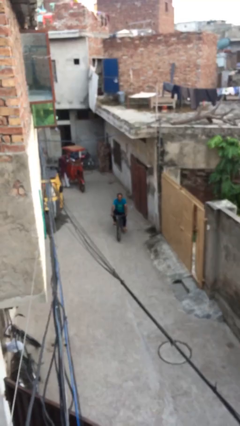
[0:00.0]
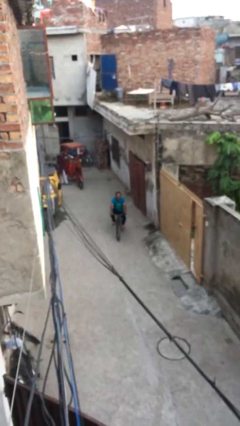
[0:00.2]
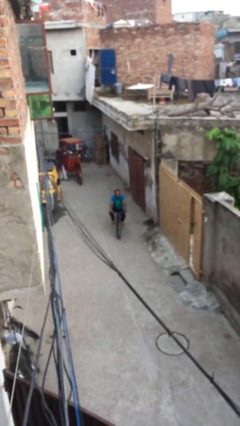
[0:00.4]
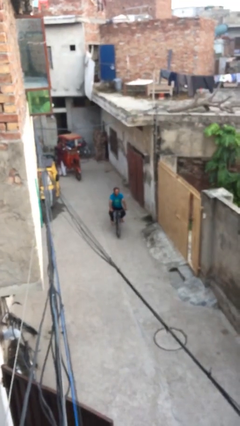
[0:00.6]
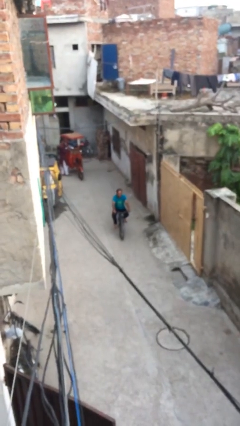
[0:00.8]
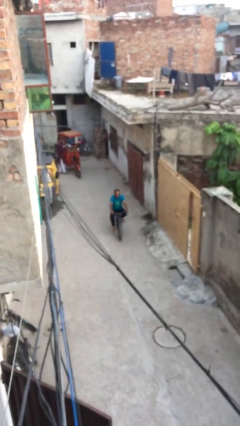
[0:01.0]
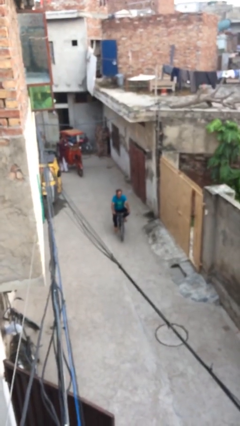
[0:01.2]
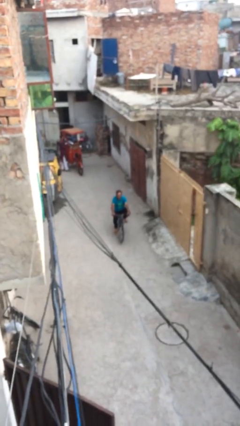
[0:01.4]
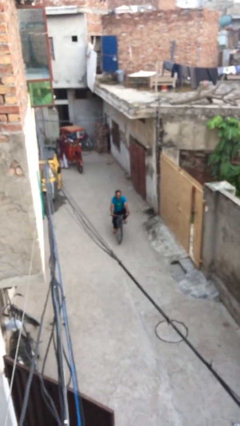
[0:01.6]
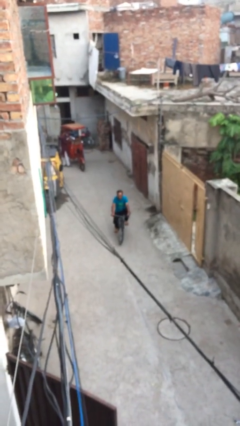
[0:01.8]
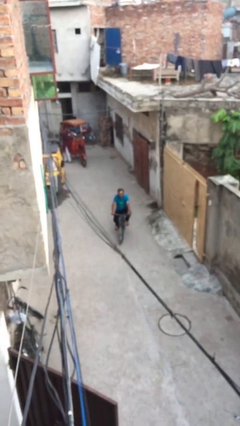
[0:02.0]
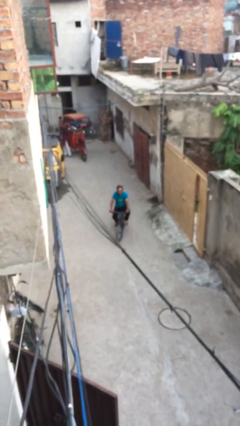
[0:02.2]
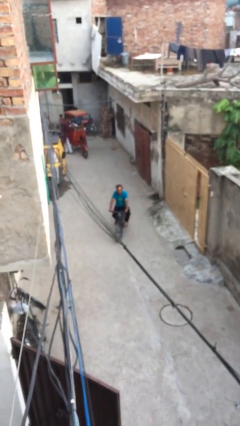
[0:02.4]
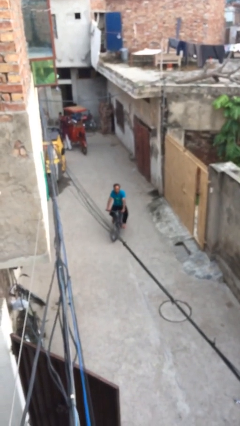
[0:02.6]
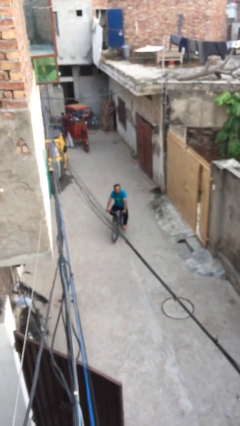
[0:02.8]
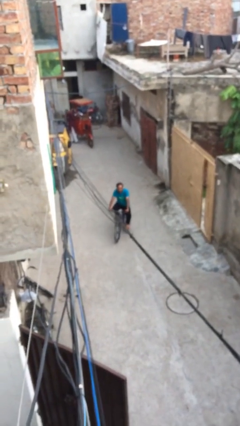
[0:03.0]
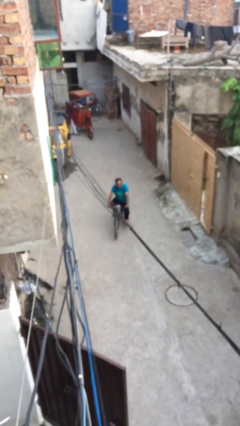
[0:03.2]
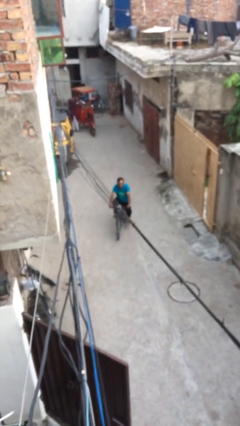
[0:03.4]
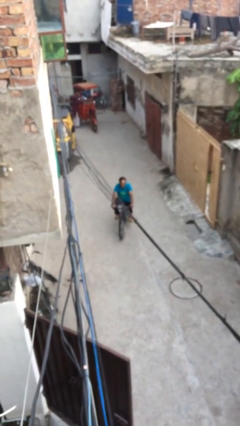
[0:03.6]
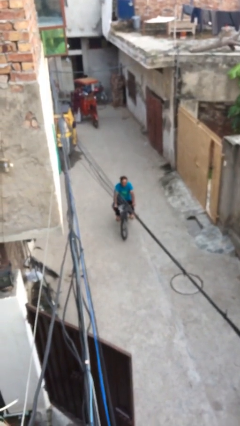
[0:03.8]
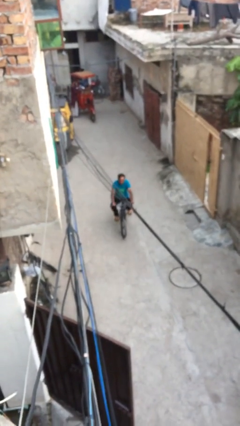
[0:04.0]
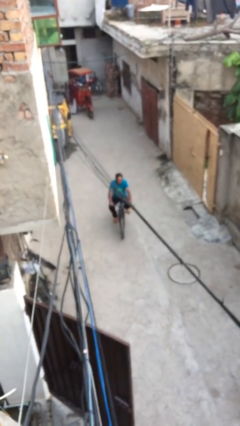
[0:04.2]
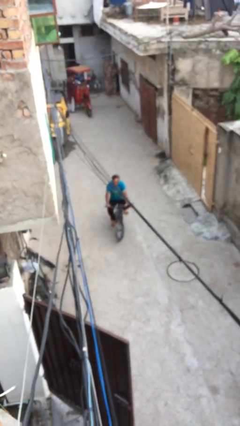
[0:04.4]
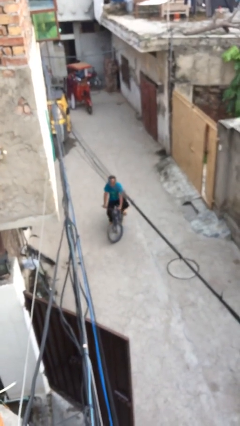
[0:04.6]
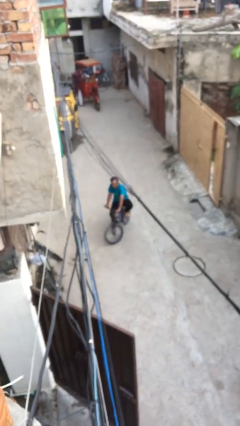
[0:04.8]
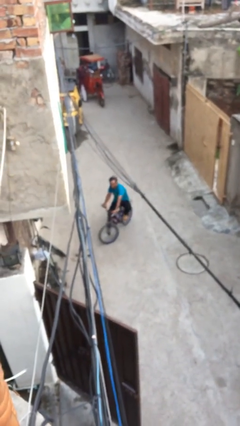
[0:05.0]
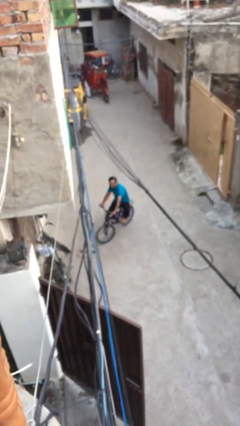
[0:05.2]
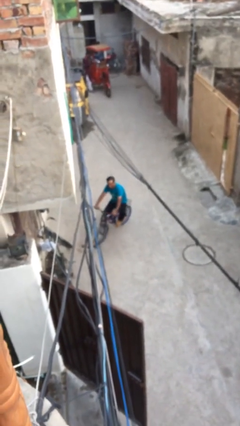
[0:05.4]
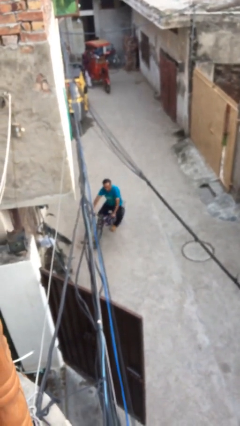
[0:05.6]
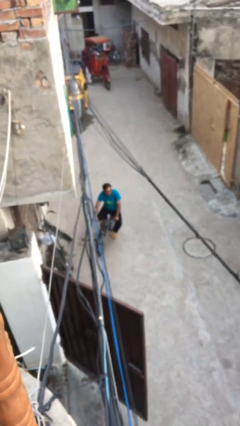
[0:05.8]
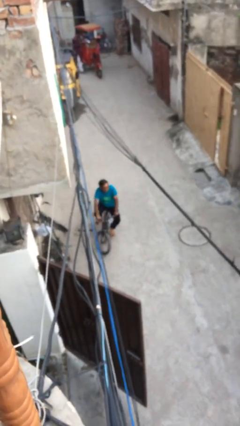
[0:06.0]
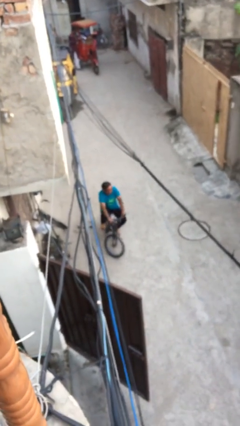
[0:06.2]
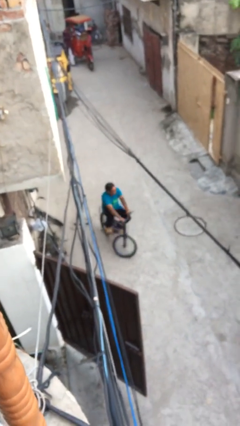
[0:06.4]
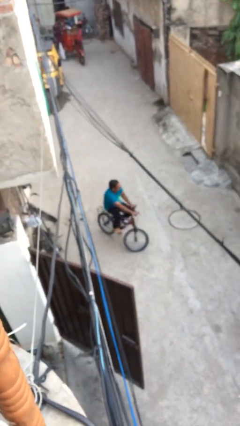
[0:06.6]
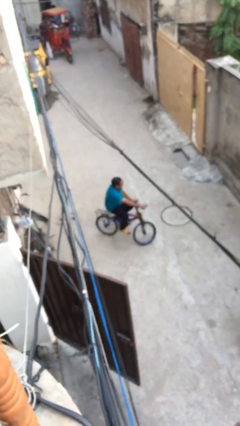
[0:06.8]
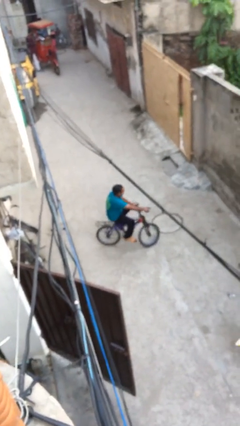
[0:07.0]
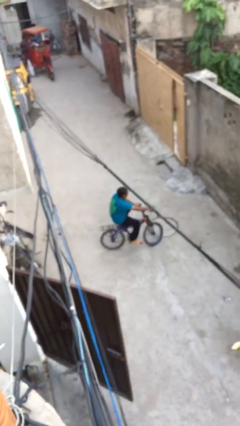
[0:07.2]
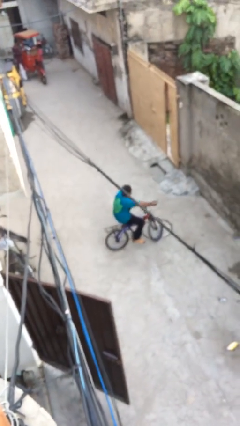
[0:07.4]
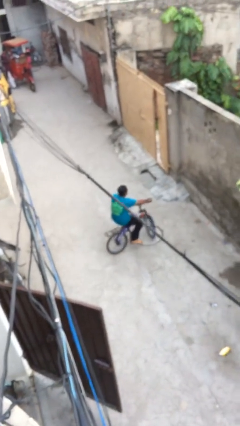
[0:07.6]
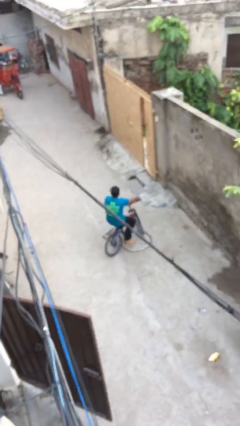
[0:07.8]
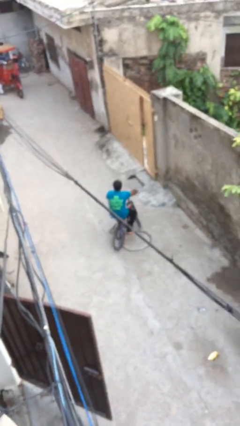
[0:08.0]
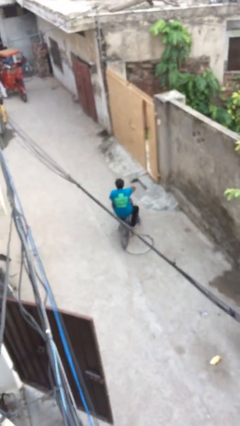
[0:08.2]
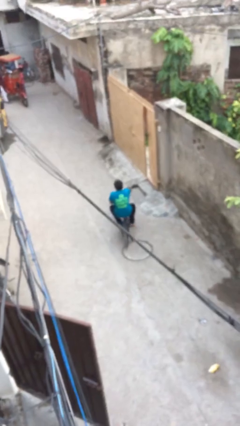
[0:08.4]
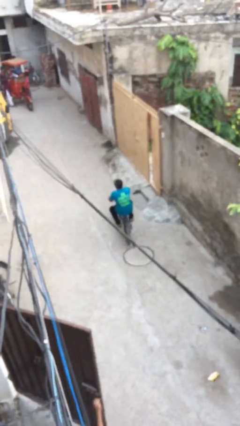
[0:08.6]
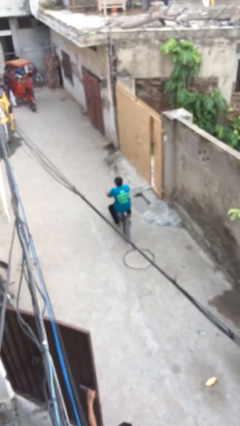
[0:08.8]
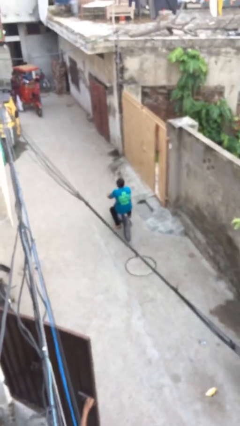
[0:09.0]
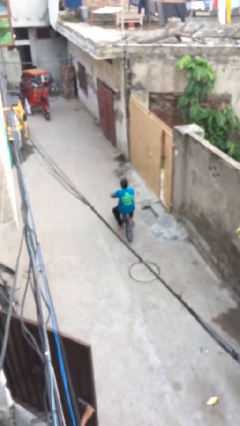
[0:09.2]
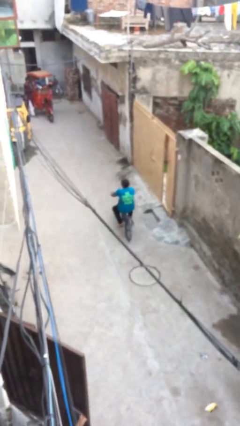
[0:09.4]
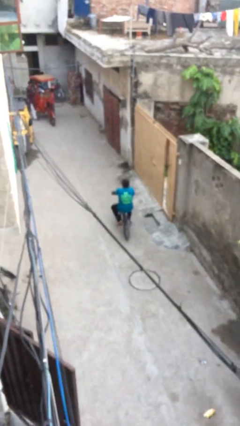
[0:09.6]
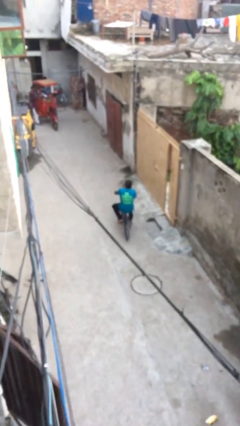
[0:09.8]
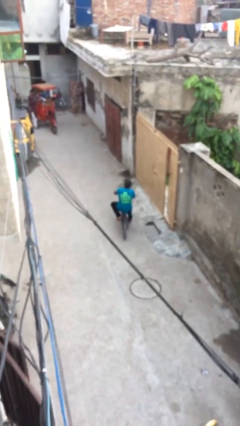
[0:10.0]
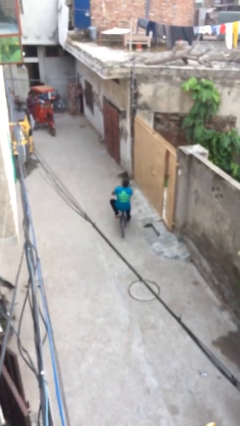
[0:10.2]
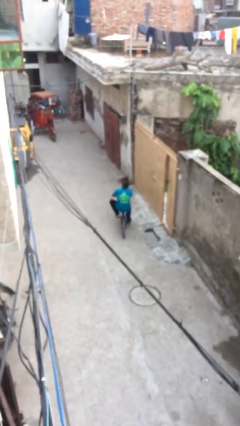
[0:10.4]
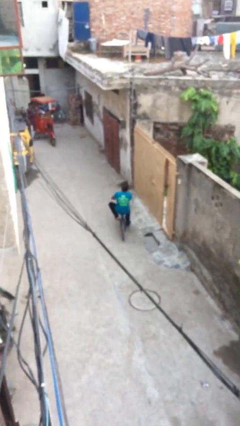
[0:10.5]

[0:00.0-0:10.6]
person rides bicycle

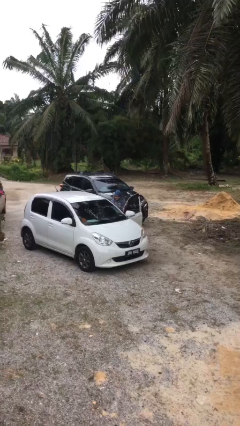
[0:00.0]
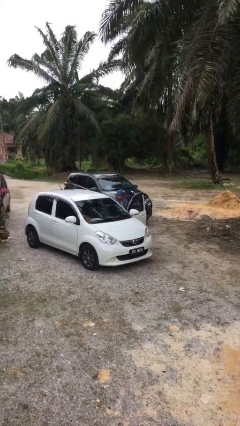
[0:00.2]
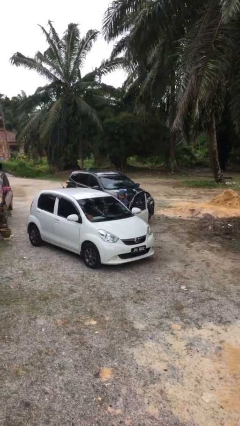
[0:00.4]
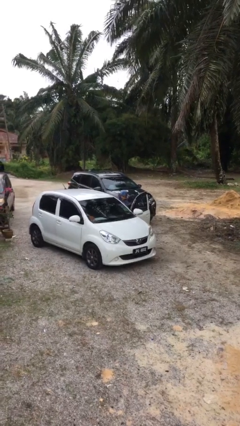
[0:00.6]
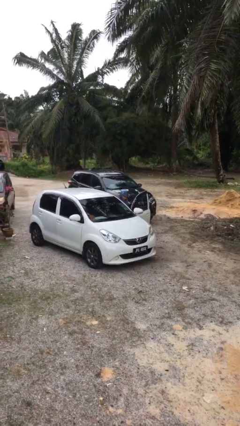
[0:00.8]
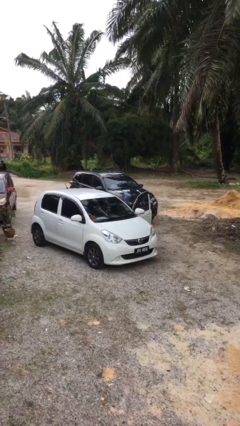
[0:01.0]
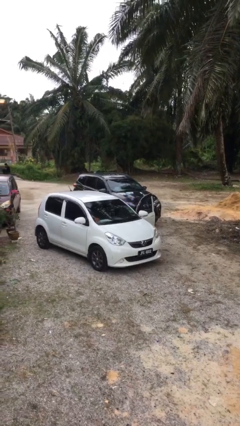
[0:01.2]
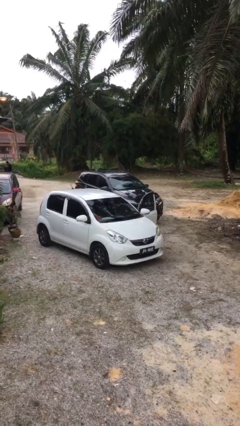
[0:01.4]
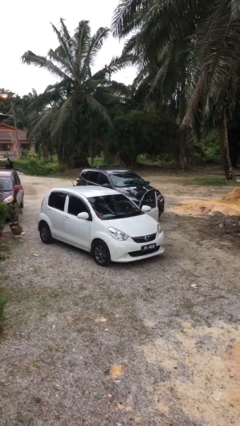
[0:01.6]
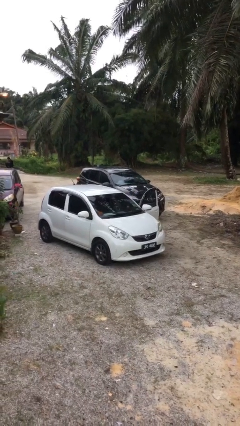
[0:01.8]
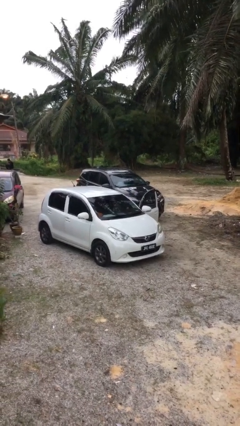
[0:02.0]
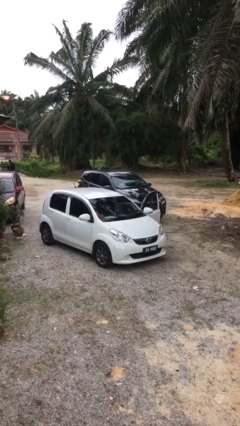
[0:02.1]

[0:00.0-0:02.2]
person enters car

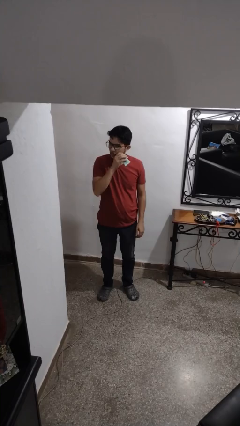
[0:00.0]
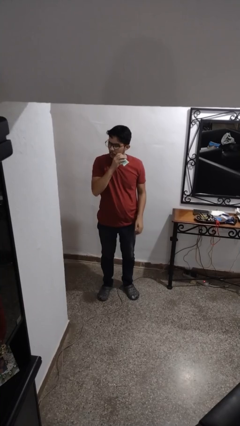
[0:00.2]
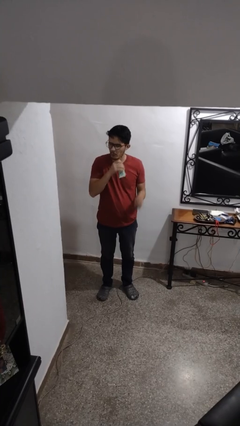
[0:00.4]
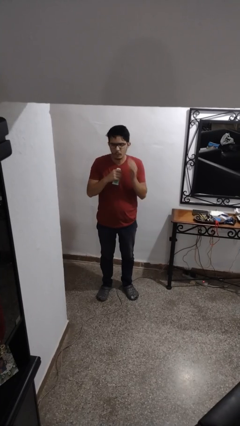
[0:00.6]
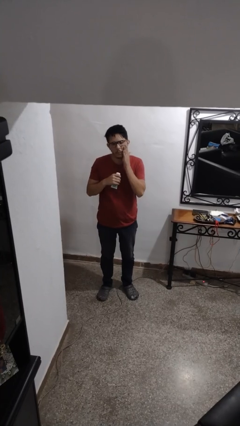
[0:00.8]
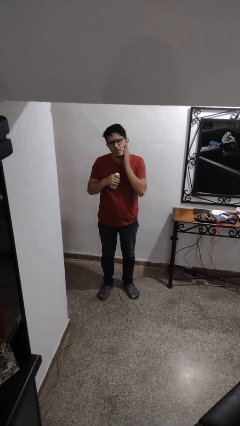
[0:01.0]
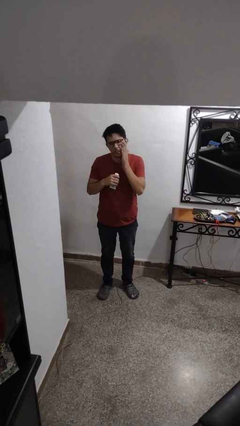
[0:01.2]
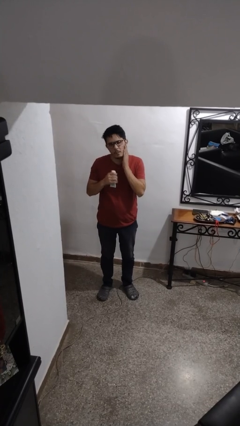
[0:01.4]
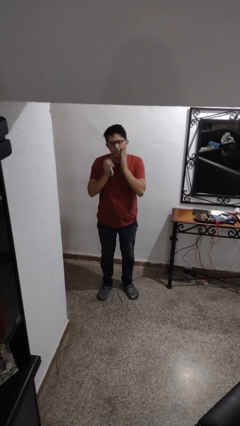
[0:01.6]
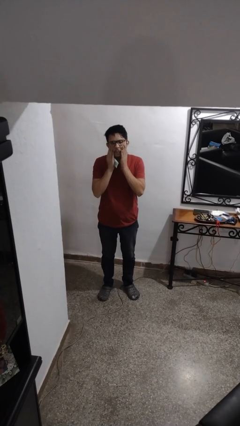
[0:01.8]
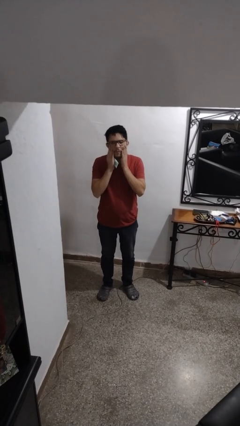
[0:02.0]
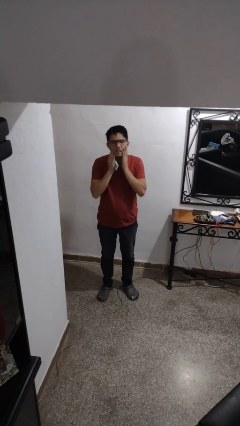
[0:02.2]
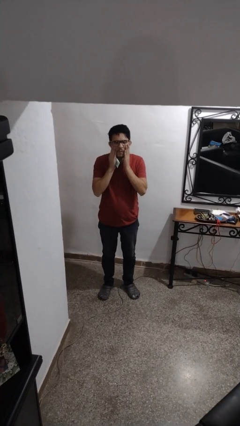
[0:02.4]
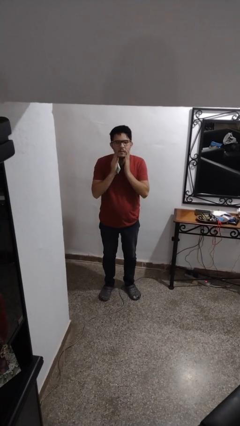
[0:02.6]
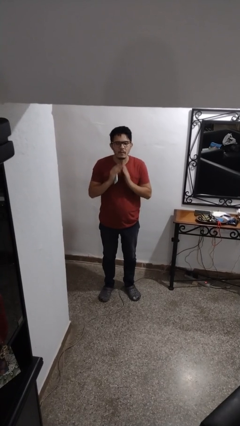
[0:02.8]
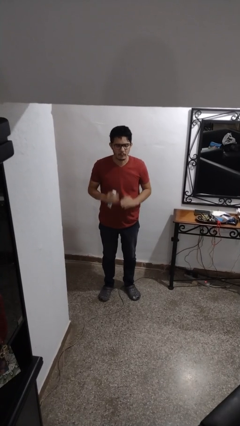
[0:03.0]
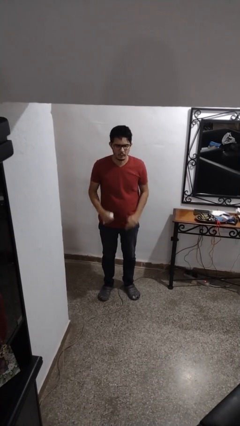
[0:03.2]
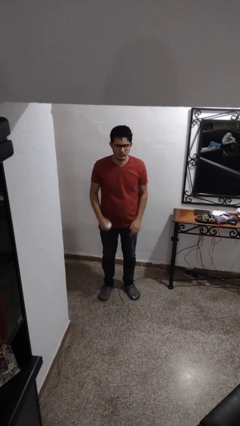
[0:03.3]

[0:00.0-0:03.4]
person applies sunscreen

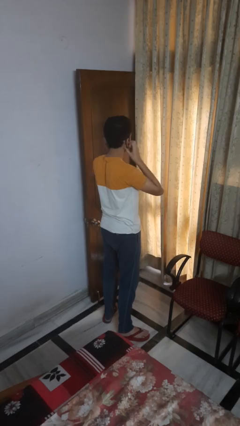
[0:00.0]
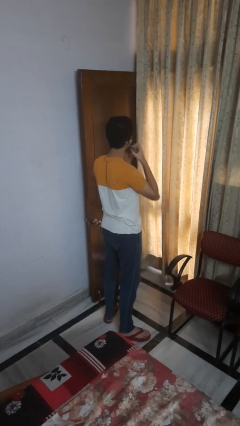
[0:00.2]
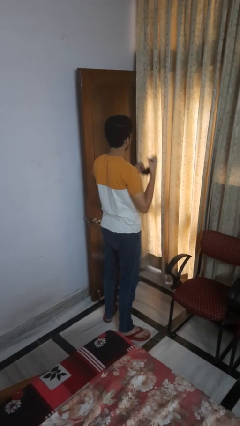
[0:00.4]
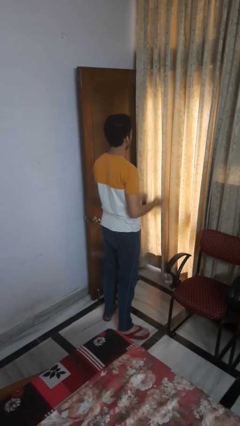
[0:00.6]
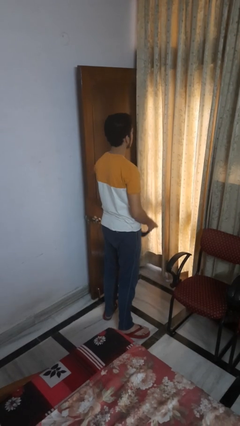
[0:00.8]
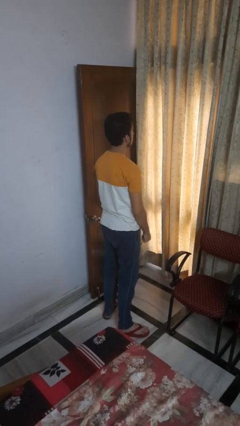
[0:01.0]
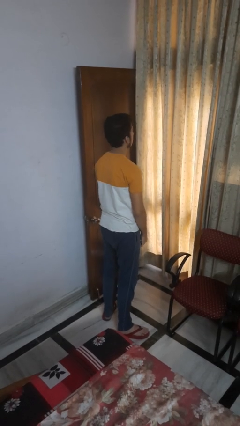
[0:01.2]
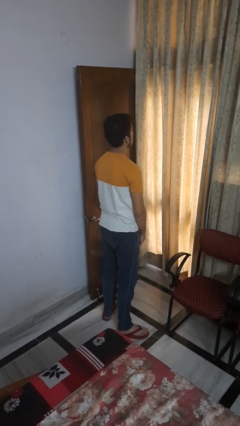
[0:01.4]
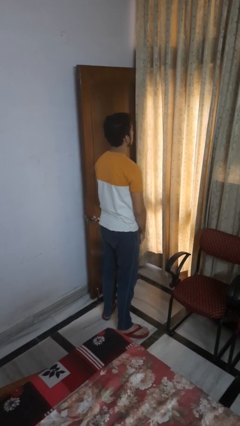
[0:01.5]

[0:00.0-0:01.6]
person takes off facemask

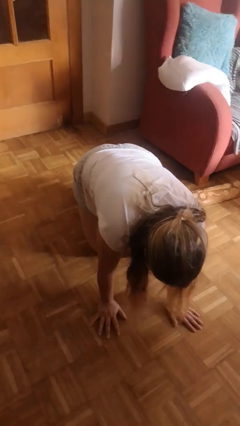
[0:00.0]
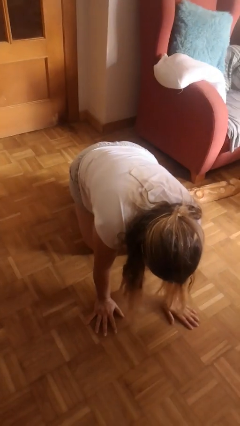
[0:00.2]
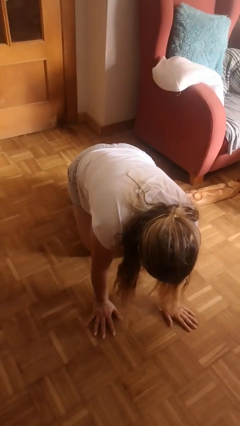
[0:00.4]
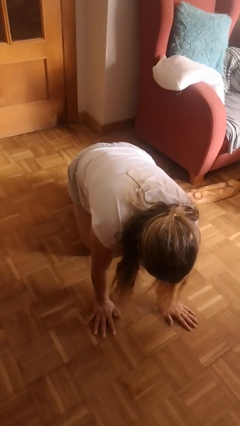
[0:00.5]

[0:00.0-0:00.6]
person trips on object on floor
